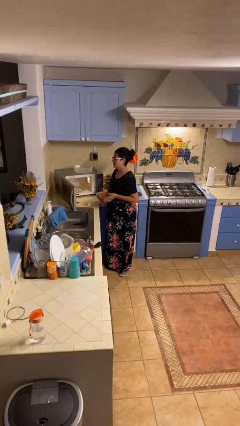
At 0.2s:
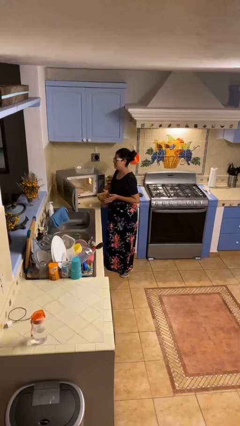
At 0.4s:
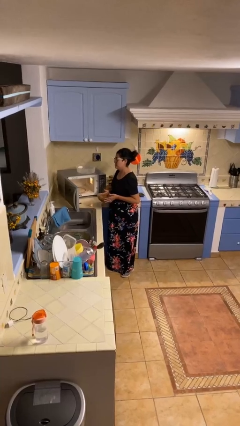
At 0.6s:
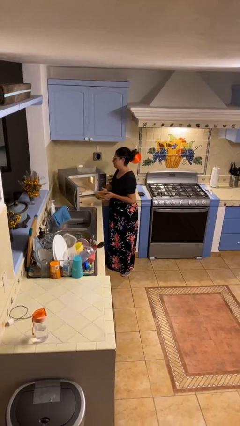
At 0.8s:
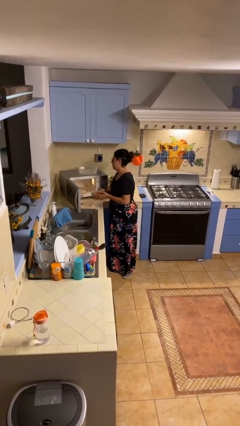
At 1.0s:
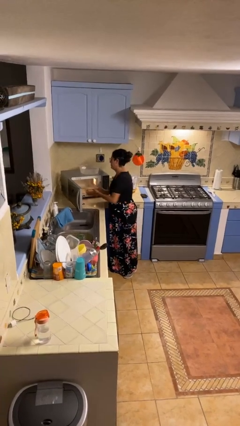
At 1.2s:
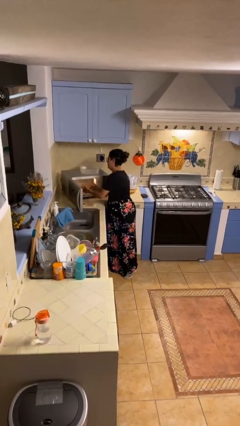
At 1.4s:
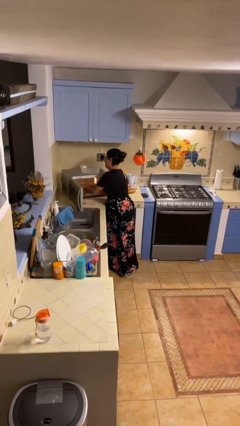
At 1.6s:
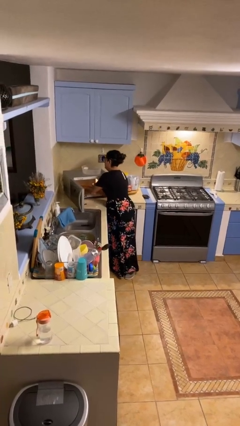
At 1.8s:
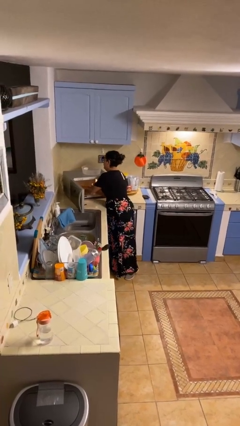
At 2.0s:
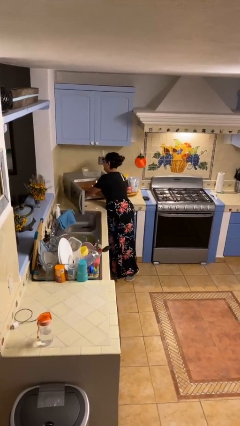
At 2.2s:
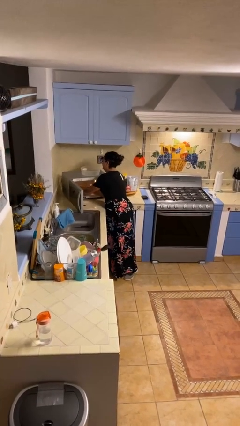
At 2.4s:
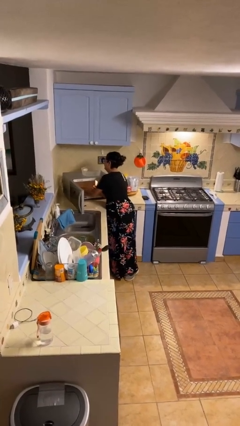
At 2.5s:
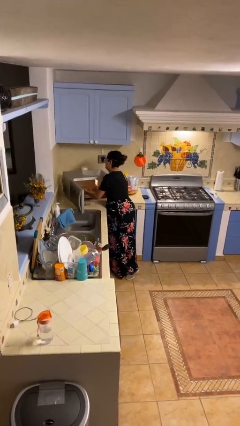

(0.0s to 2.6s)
person puts object into microwave

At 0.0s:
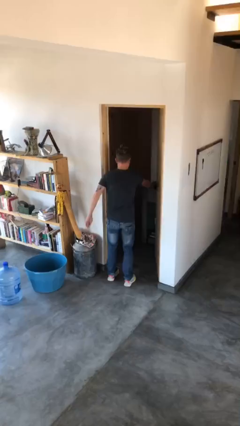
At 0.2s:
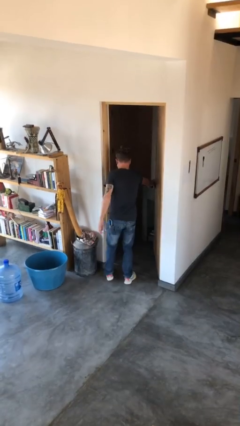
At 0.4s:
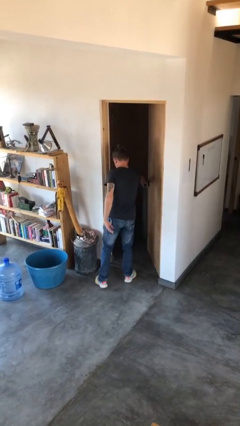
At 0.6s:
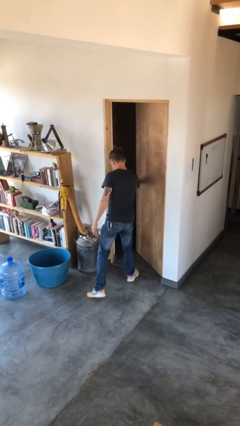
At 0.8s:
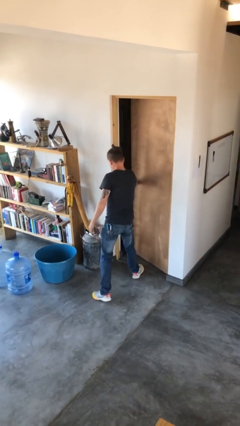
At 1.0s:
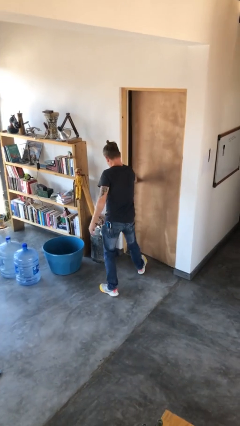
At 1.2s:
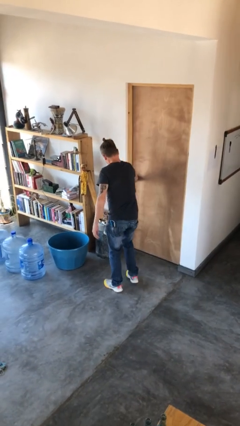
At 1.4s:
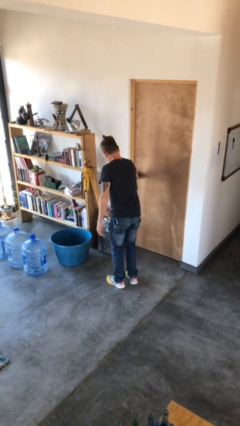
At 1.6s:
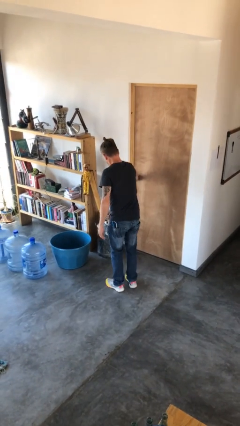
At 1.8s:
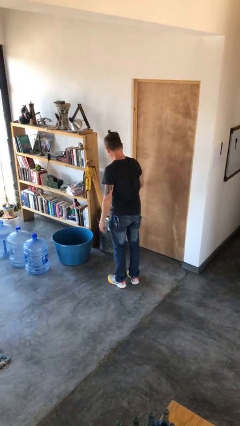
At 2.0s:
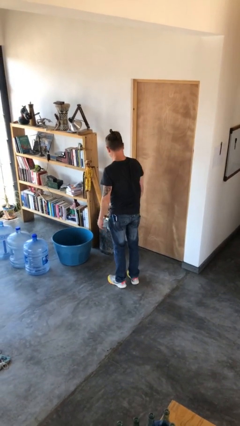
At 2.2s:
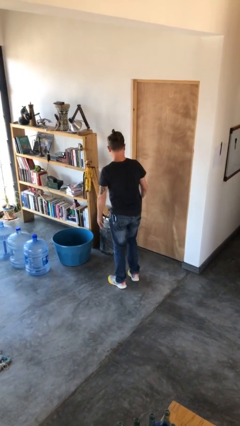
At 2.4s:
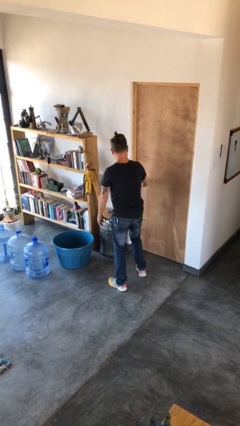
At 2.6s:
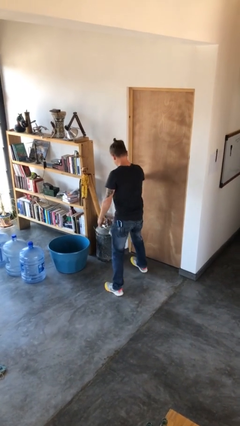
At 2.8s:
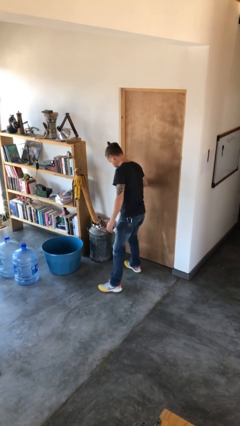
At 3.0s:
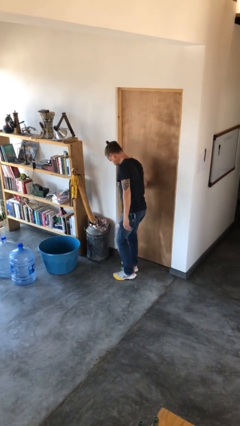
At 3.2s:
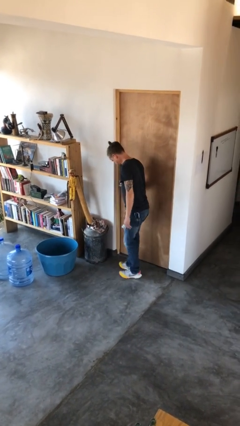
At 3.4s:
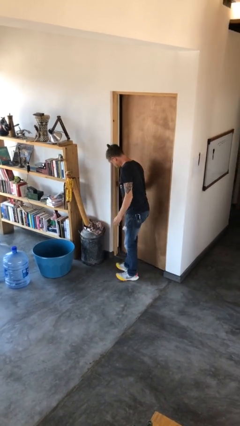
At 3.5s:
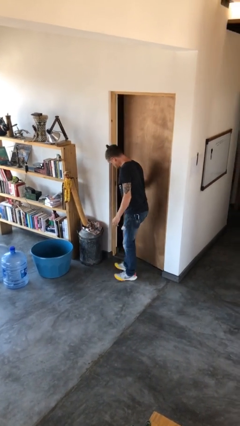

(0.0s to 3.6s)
person opens facility door

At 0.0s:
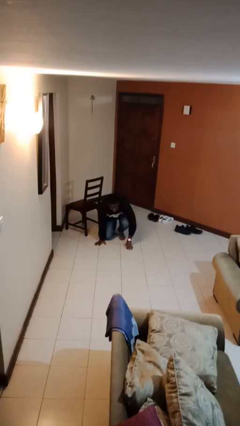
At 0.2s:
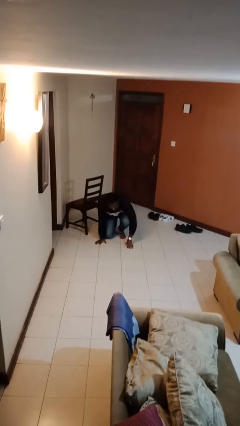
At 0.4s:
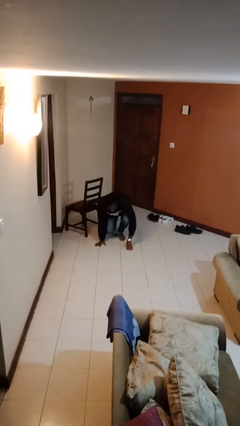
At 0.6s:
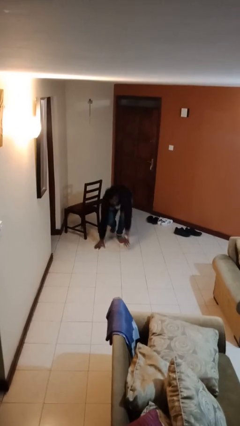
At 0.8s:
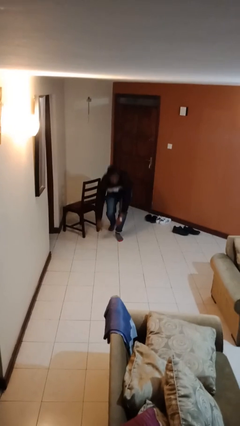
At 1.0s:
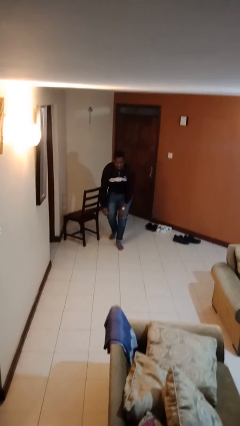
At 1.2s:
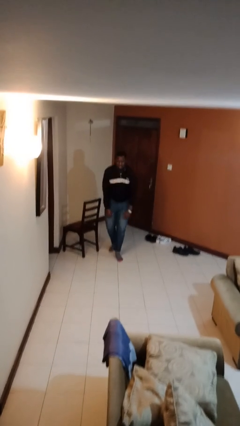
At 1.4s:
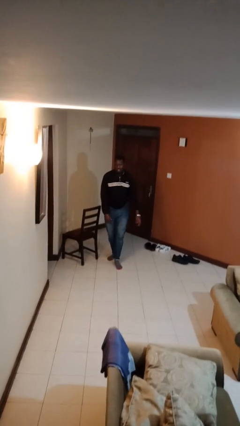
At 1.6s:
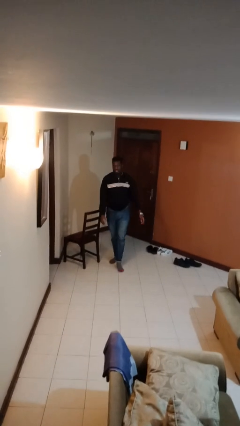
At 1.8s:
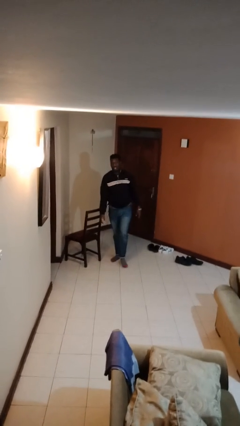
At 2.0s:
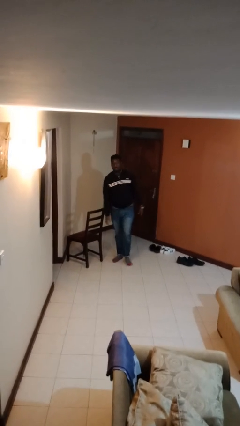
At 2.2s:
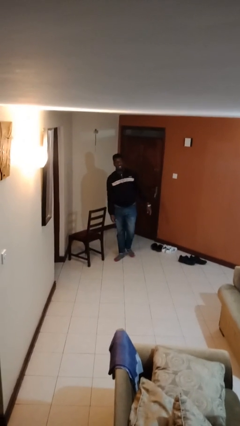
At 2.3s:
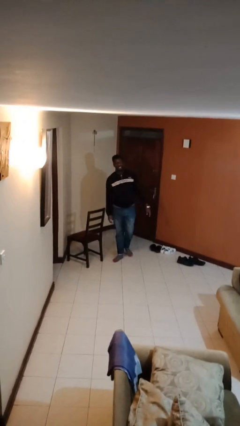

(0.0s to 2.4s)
person stands up from floor

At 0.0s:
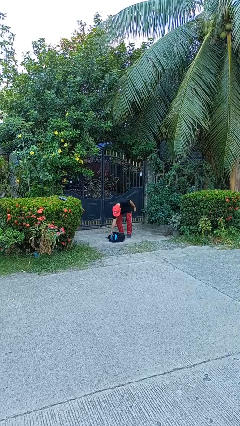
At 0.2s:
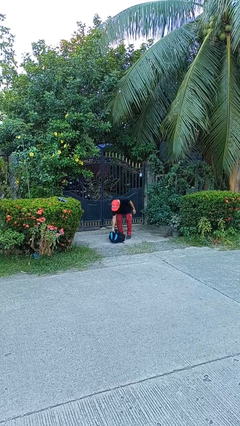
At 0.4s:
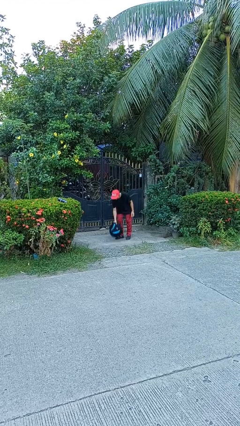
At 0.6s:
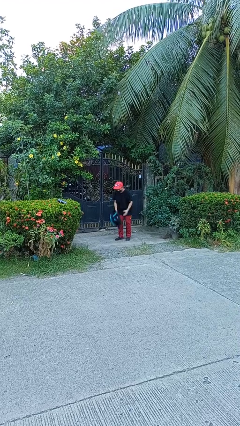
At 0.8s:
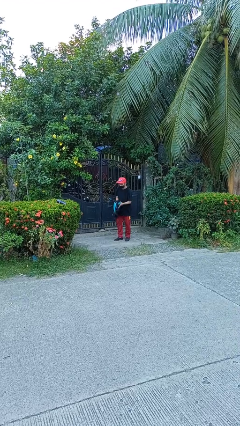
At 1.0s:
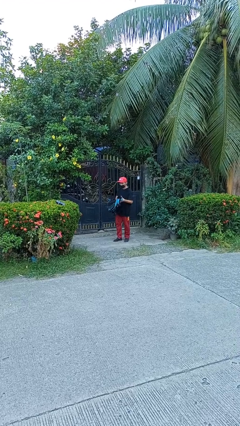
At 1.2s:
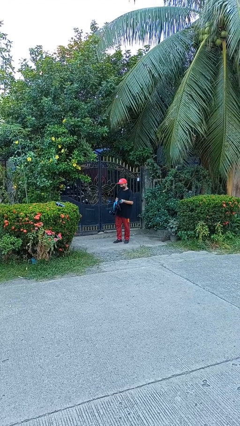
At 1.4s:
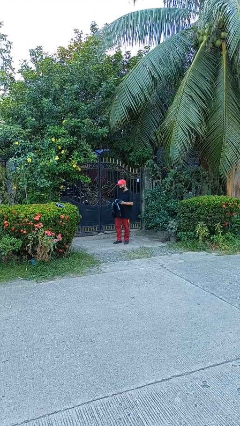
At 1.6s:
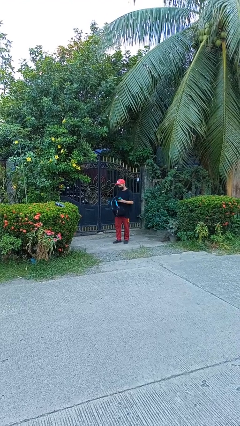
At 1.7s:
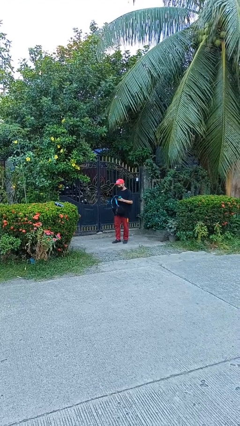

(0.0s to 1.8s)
person picks up object from floor

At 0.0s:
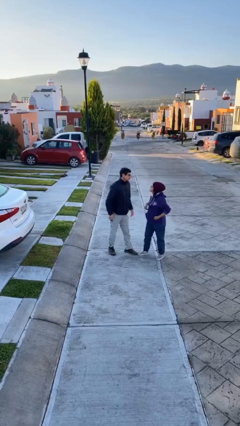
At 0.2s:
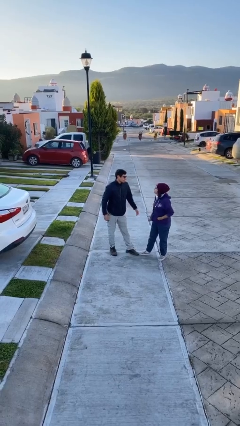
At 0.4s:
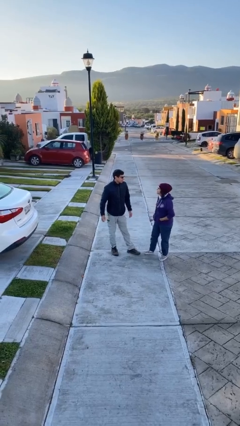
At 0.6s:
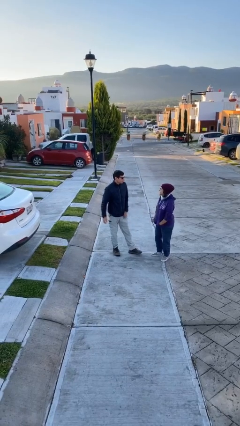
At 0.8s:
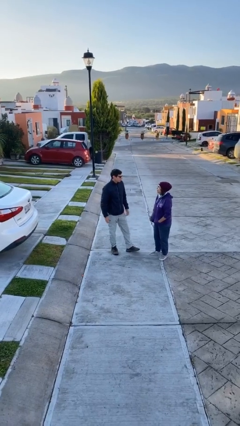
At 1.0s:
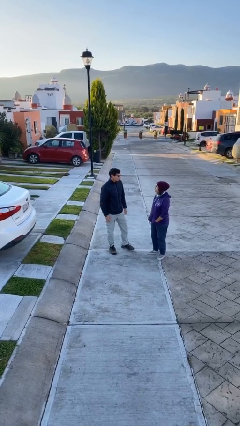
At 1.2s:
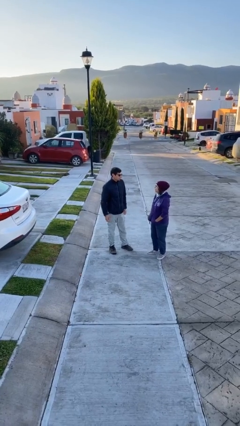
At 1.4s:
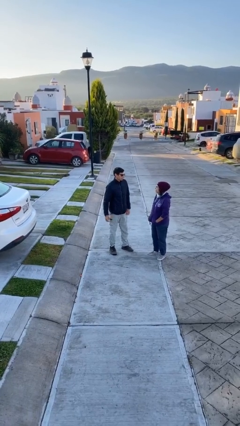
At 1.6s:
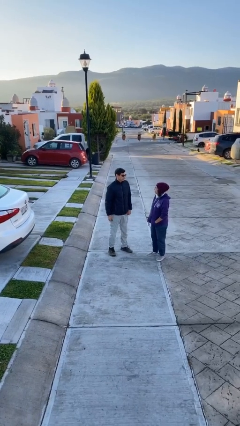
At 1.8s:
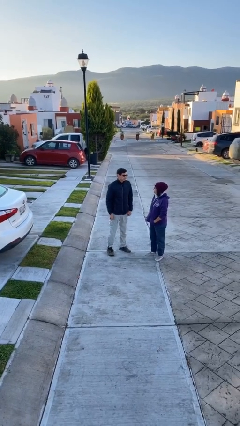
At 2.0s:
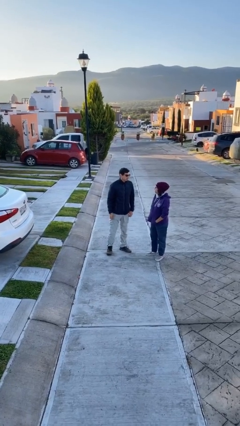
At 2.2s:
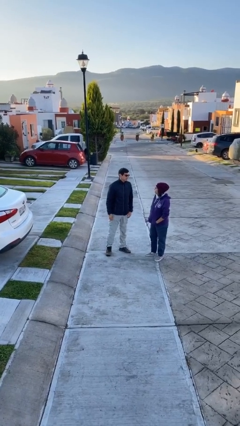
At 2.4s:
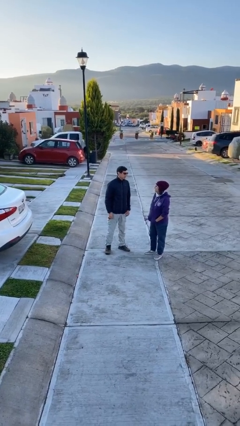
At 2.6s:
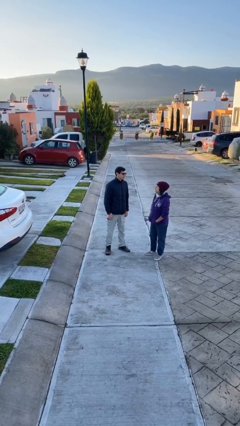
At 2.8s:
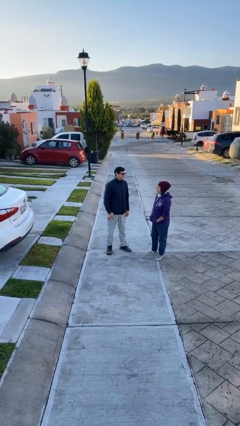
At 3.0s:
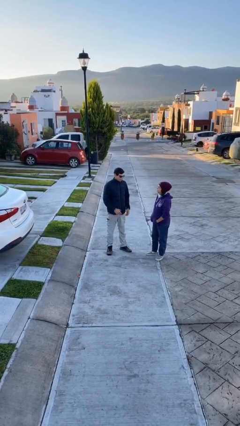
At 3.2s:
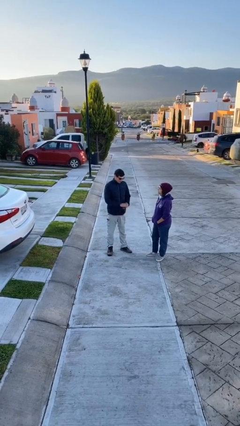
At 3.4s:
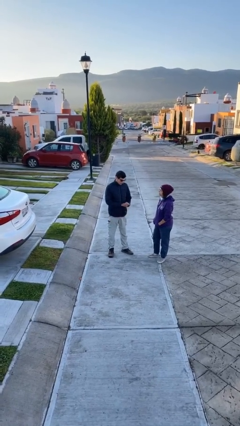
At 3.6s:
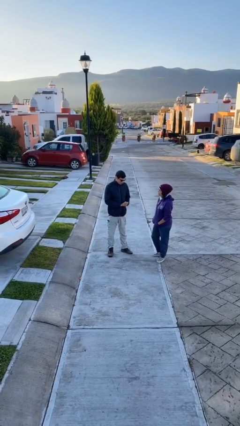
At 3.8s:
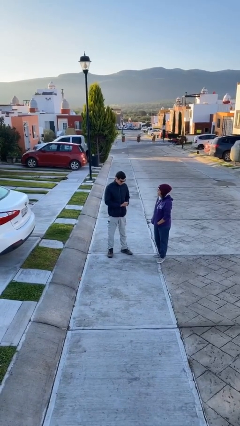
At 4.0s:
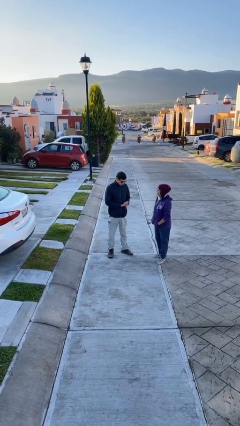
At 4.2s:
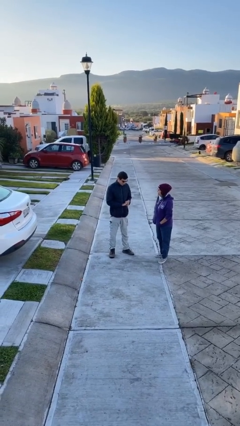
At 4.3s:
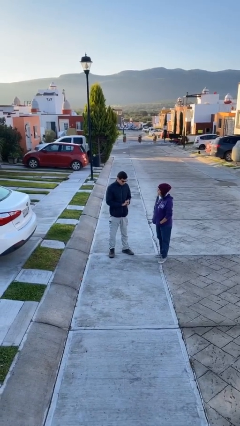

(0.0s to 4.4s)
person talks to person

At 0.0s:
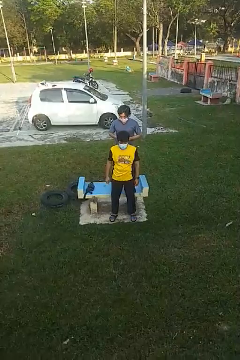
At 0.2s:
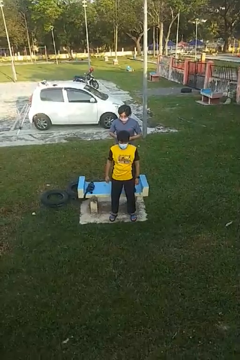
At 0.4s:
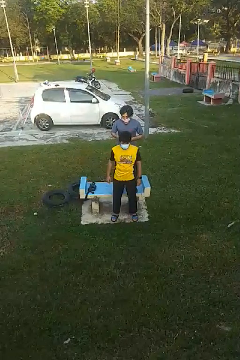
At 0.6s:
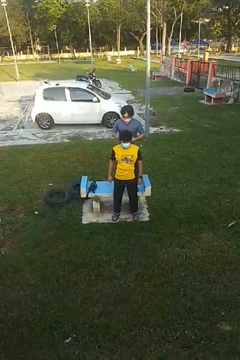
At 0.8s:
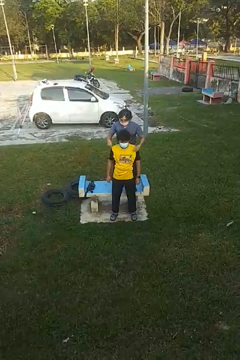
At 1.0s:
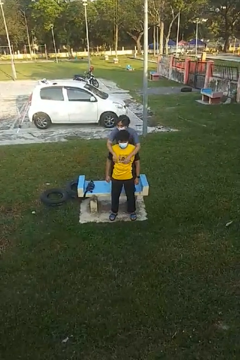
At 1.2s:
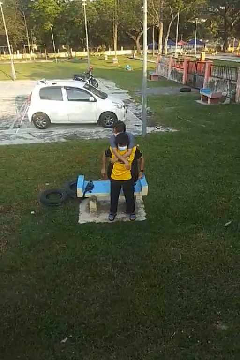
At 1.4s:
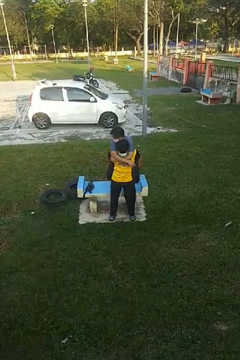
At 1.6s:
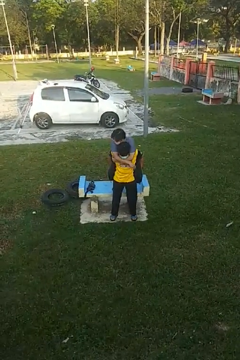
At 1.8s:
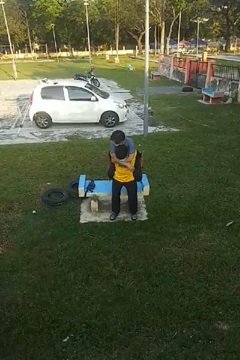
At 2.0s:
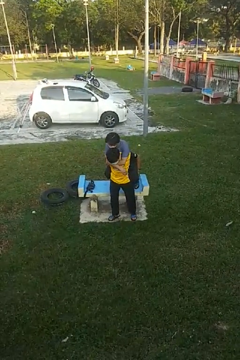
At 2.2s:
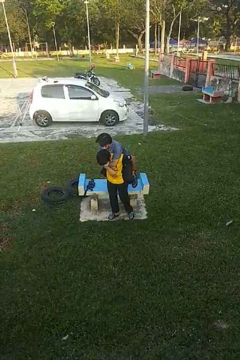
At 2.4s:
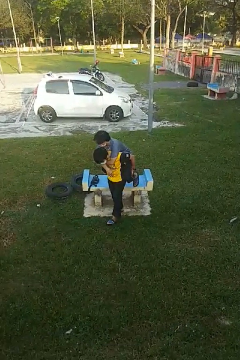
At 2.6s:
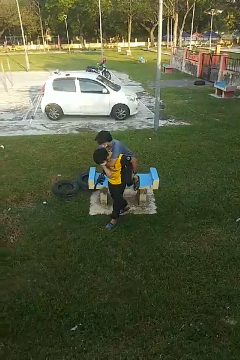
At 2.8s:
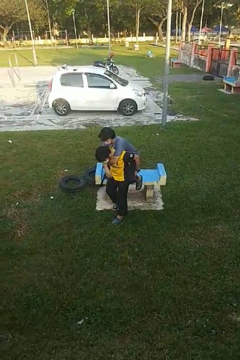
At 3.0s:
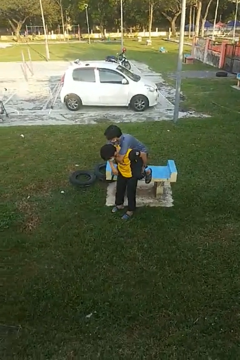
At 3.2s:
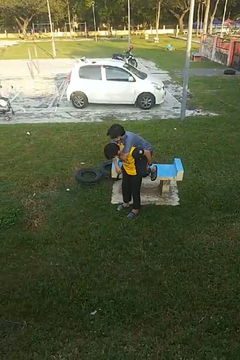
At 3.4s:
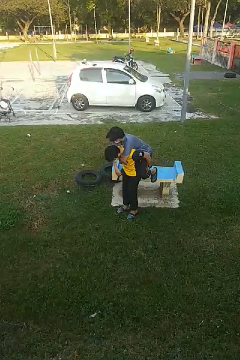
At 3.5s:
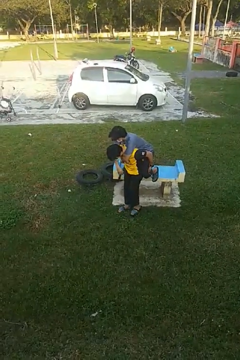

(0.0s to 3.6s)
person carries person over shoulder
